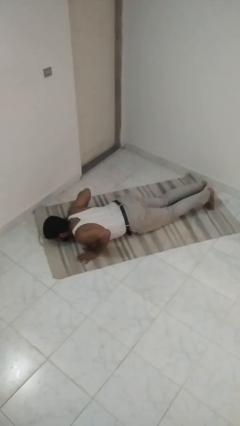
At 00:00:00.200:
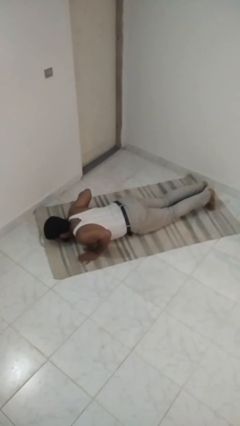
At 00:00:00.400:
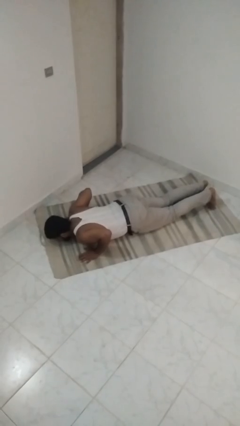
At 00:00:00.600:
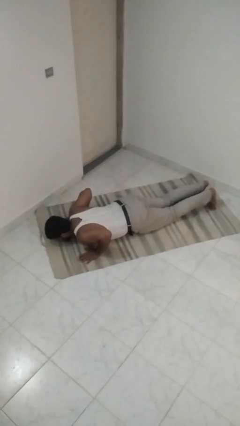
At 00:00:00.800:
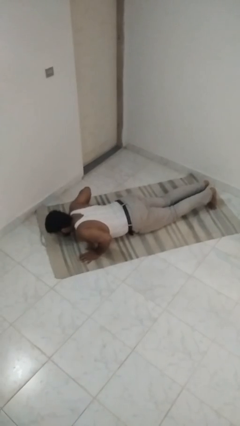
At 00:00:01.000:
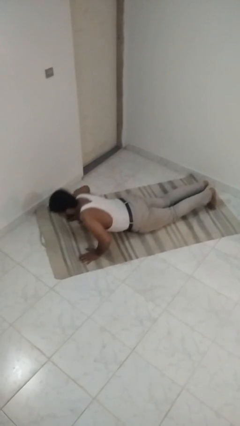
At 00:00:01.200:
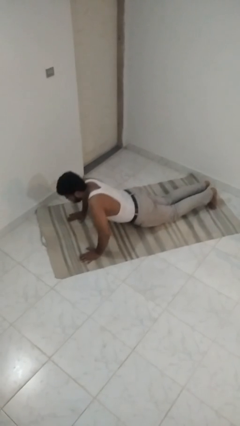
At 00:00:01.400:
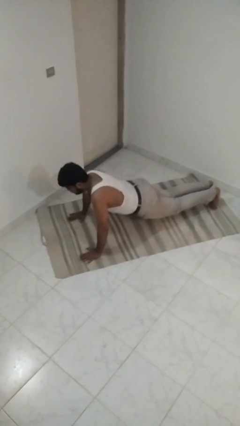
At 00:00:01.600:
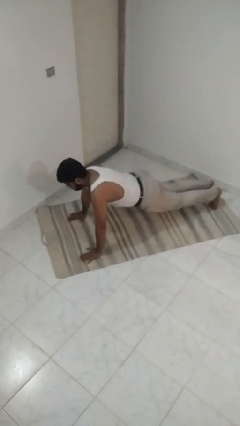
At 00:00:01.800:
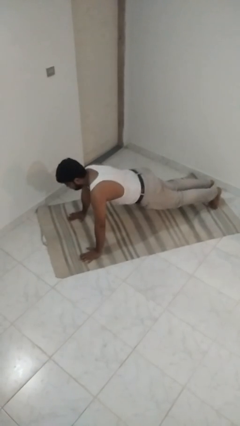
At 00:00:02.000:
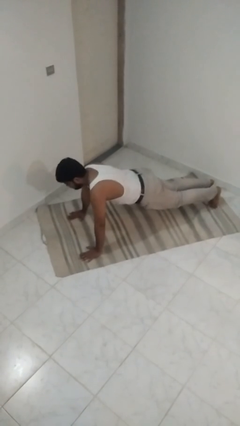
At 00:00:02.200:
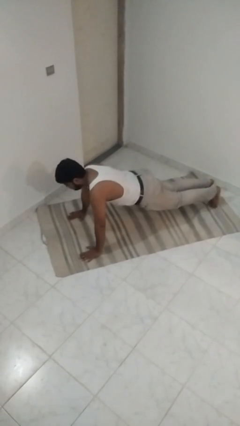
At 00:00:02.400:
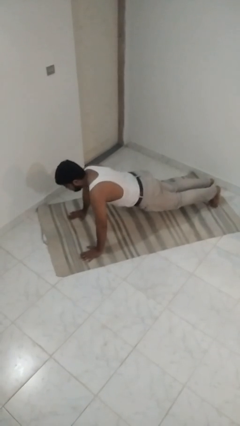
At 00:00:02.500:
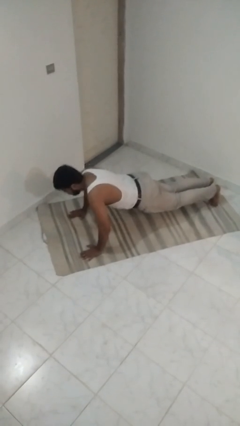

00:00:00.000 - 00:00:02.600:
person exercises with pushup

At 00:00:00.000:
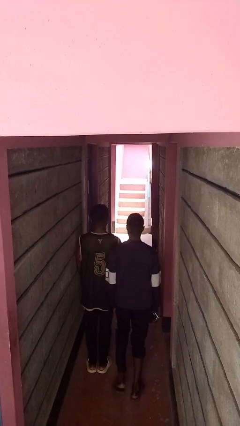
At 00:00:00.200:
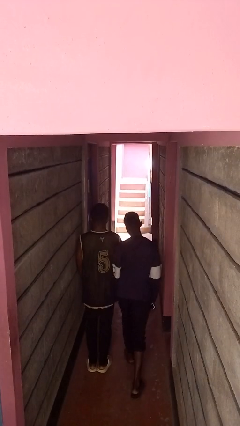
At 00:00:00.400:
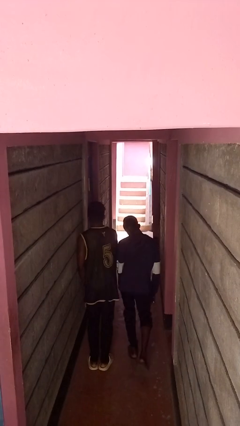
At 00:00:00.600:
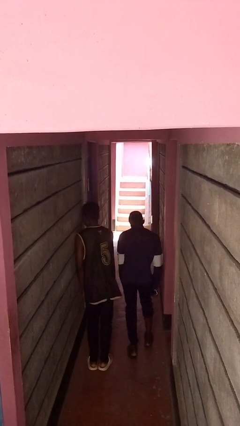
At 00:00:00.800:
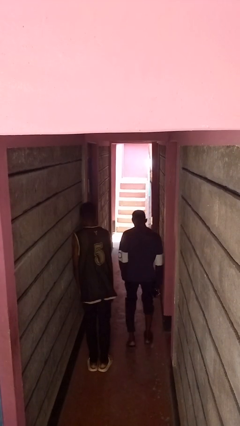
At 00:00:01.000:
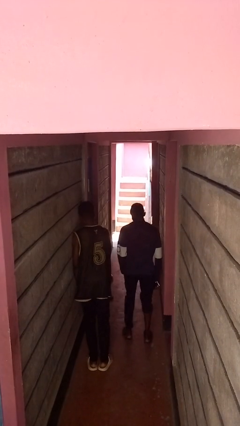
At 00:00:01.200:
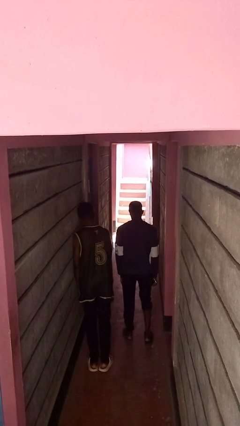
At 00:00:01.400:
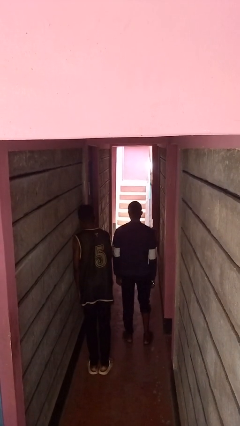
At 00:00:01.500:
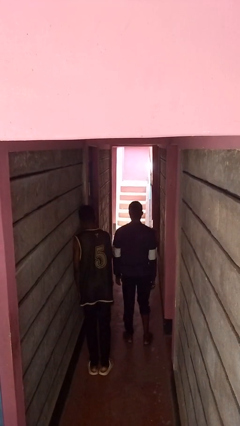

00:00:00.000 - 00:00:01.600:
person bumps into person

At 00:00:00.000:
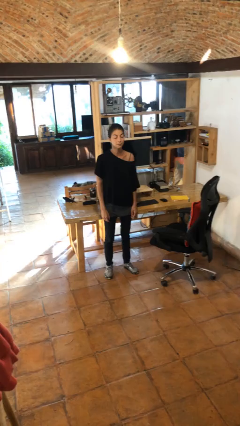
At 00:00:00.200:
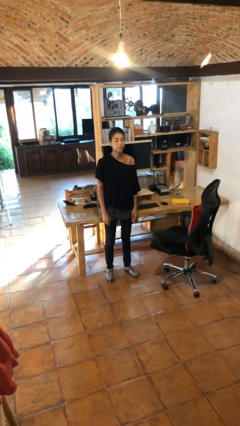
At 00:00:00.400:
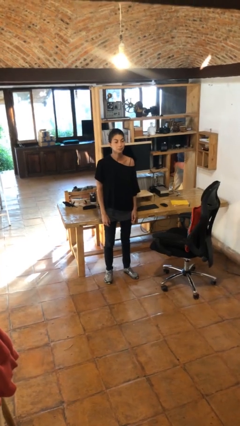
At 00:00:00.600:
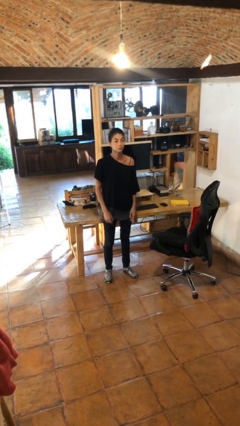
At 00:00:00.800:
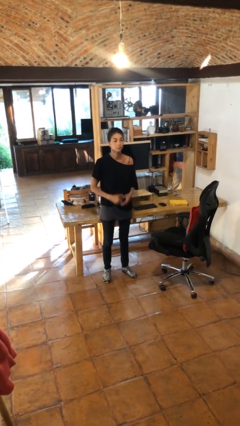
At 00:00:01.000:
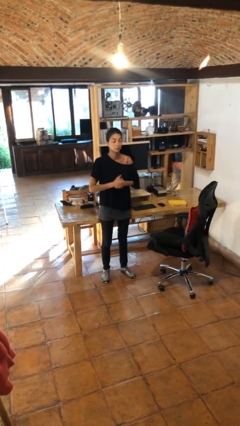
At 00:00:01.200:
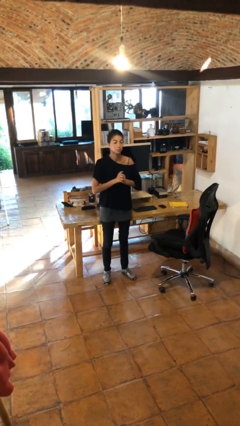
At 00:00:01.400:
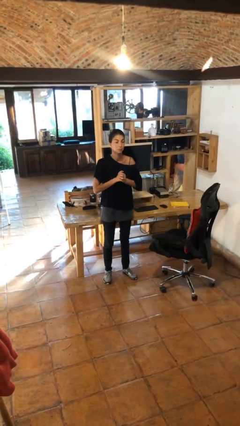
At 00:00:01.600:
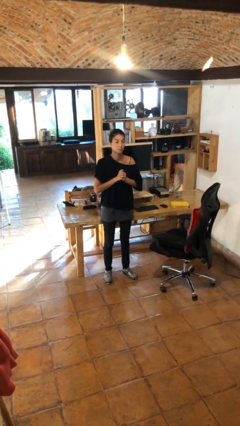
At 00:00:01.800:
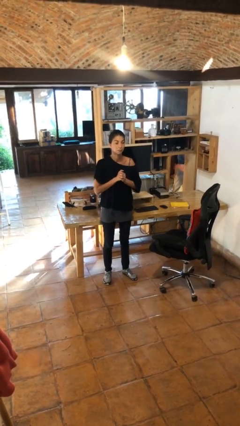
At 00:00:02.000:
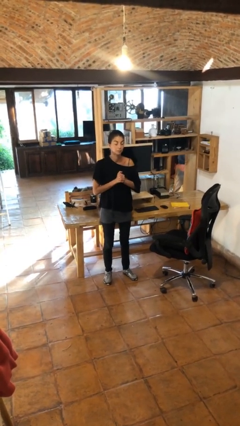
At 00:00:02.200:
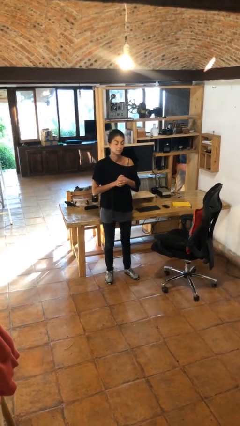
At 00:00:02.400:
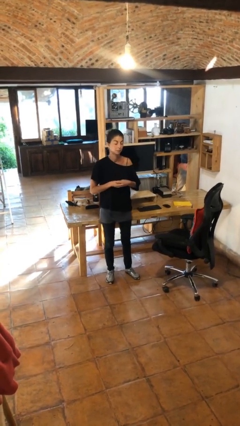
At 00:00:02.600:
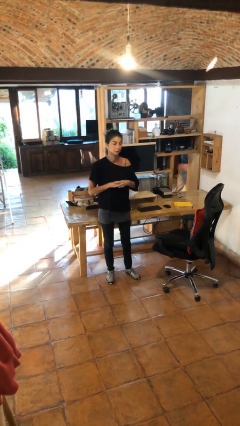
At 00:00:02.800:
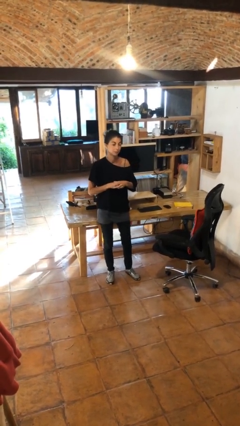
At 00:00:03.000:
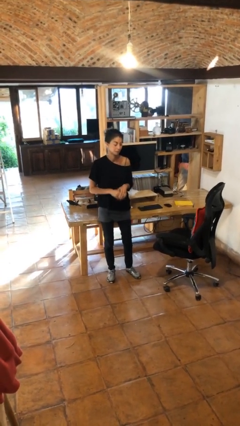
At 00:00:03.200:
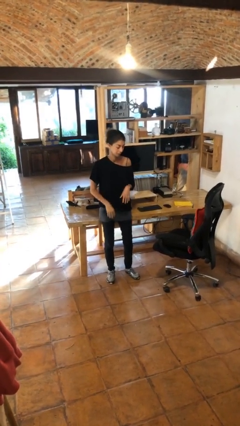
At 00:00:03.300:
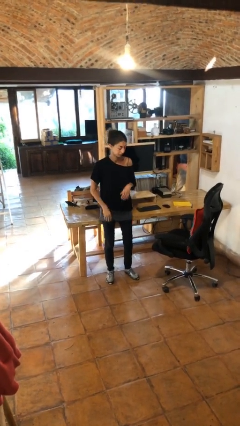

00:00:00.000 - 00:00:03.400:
person cracks knuckles

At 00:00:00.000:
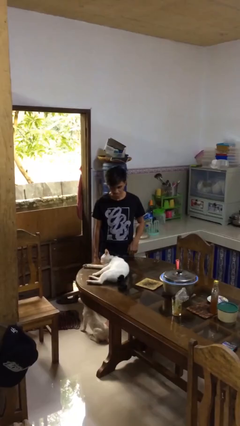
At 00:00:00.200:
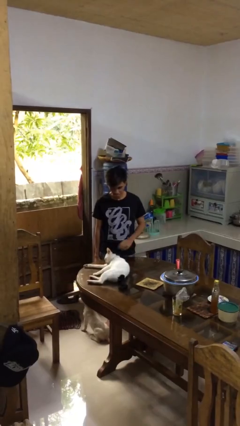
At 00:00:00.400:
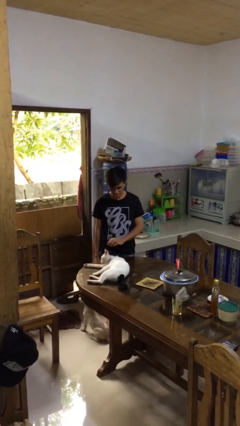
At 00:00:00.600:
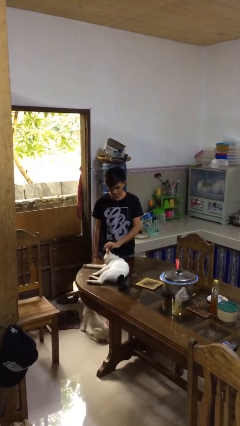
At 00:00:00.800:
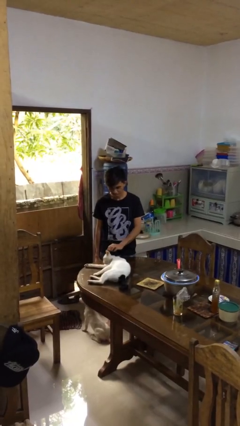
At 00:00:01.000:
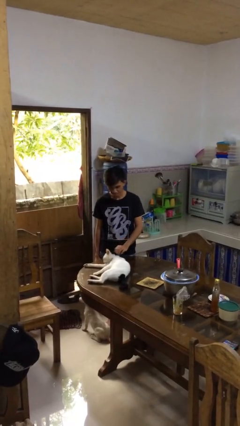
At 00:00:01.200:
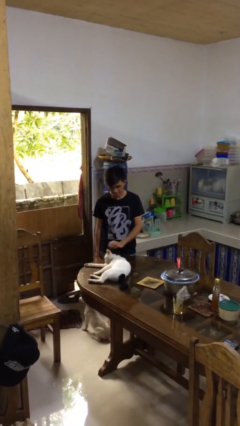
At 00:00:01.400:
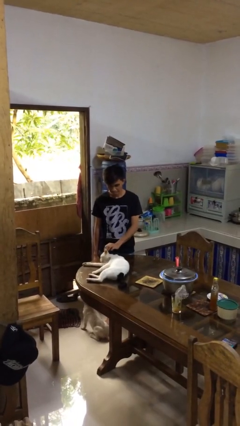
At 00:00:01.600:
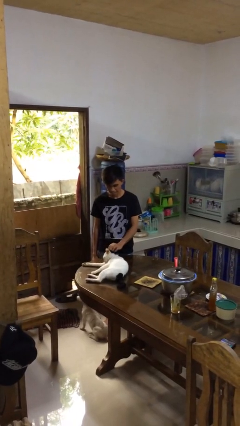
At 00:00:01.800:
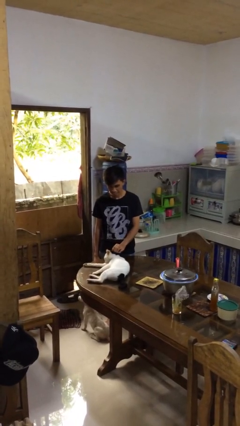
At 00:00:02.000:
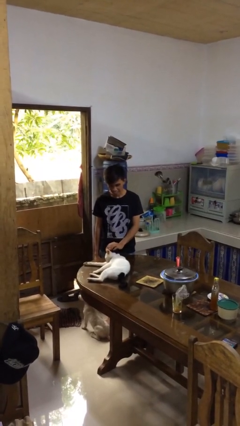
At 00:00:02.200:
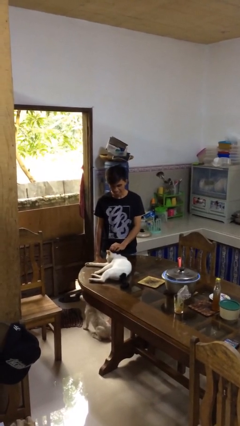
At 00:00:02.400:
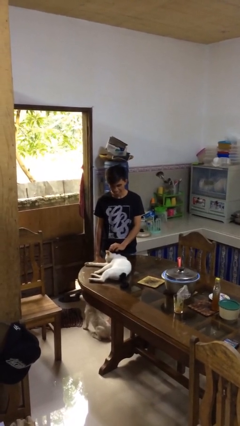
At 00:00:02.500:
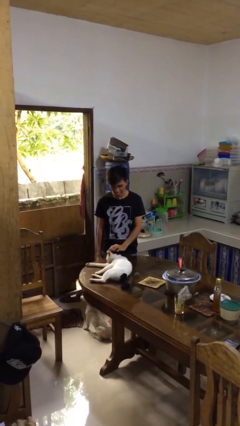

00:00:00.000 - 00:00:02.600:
person pets cat

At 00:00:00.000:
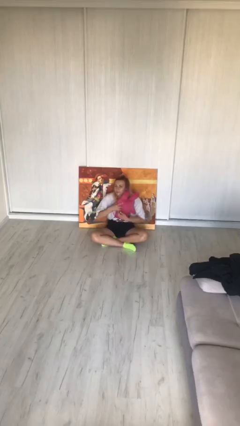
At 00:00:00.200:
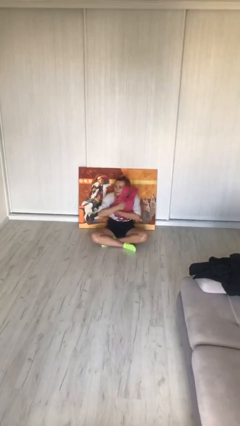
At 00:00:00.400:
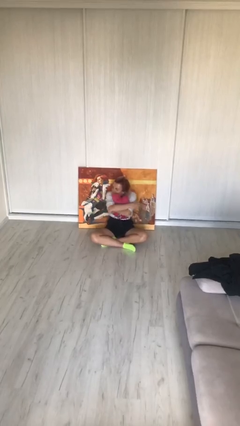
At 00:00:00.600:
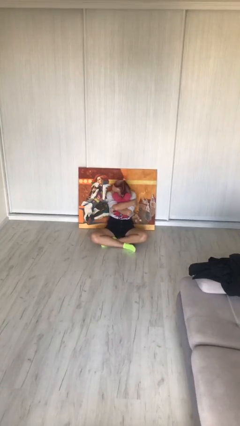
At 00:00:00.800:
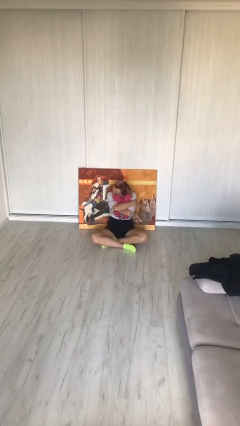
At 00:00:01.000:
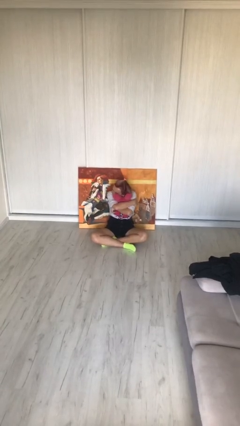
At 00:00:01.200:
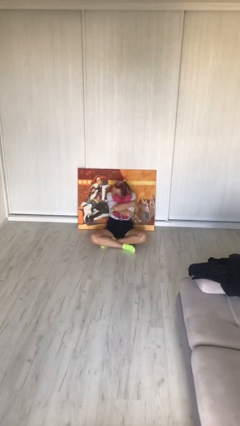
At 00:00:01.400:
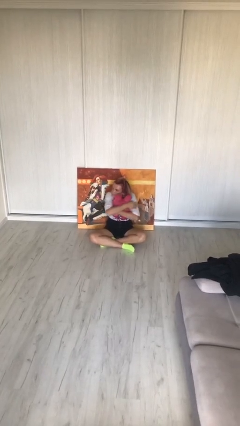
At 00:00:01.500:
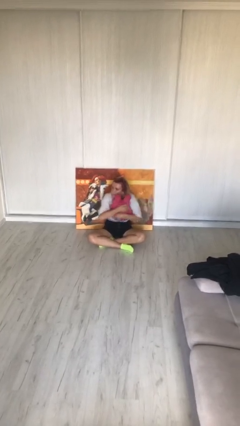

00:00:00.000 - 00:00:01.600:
person hugs stuffed animal

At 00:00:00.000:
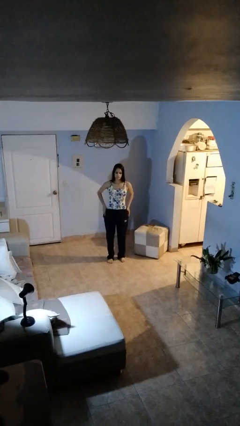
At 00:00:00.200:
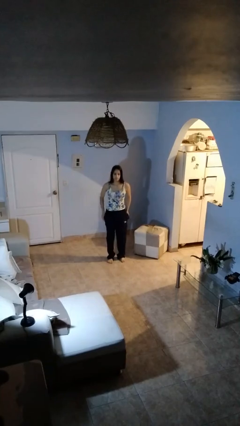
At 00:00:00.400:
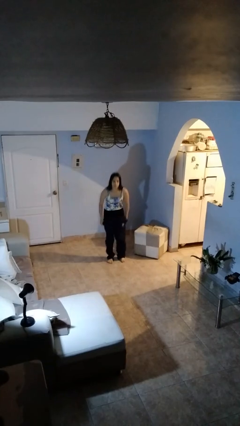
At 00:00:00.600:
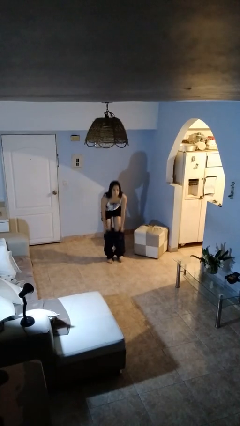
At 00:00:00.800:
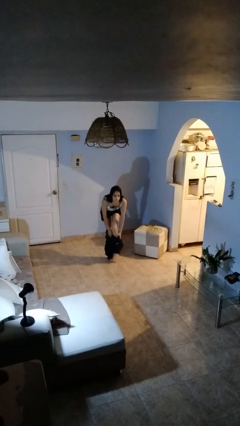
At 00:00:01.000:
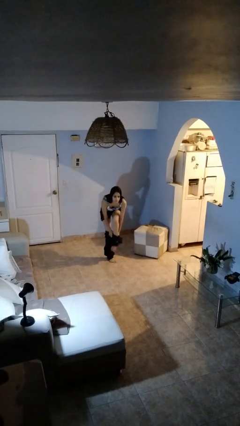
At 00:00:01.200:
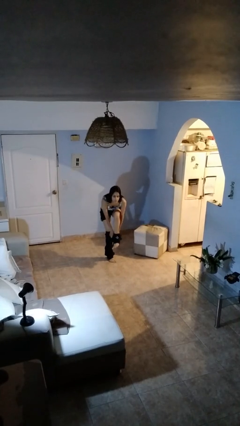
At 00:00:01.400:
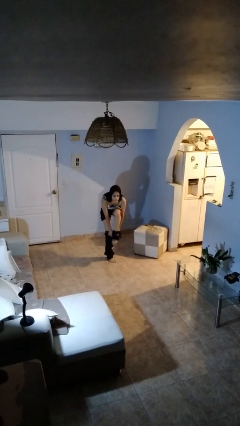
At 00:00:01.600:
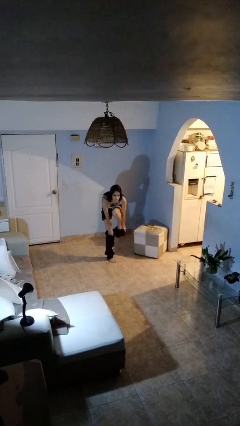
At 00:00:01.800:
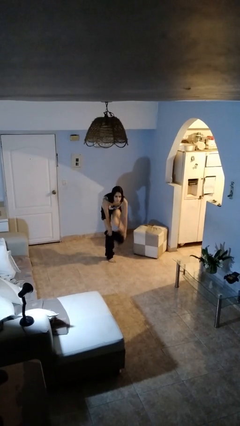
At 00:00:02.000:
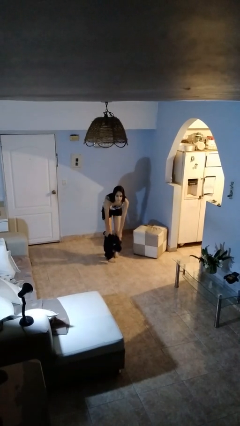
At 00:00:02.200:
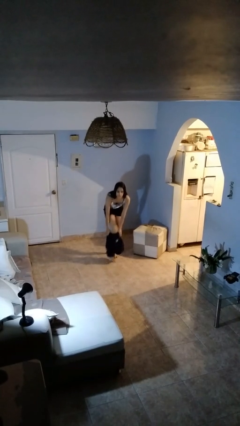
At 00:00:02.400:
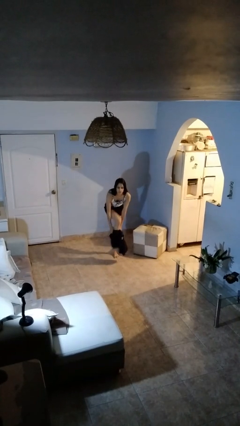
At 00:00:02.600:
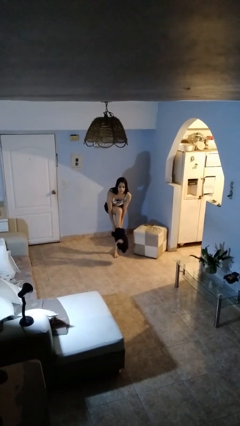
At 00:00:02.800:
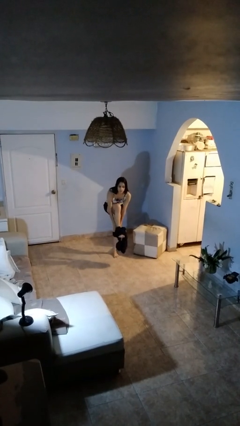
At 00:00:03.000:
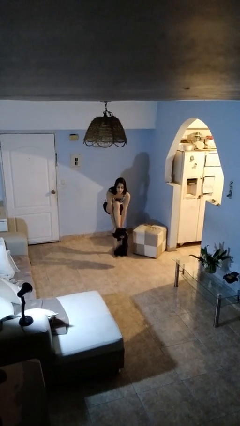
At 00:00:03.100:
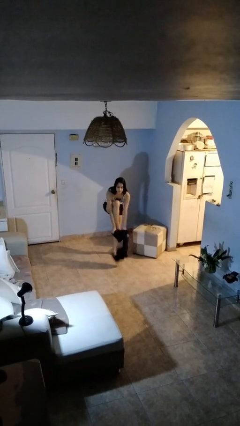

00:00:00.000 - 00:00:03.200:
person puts on pants

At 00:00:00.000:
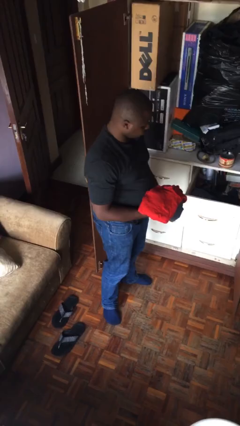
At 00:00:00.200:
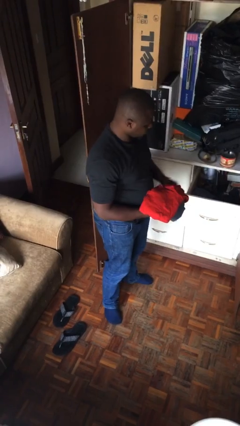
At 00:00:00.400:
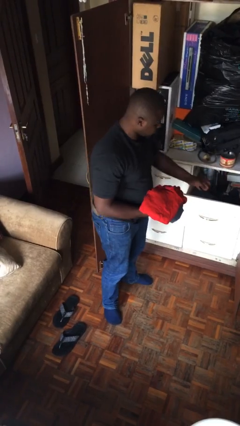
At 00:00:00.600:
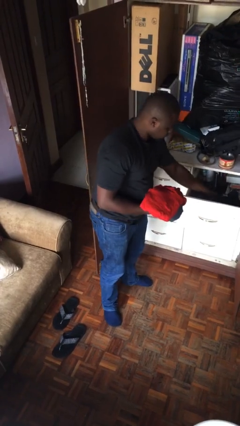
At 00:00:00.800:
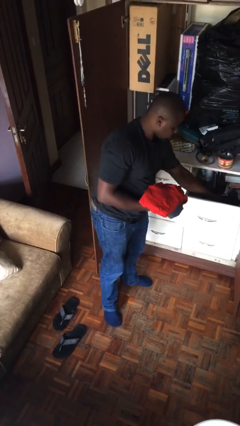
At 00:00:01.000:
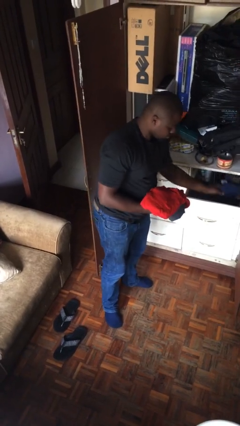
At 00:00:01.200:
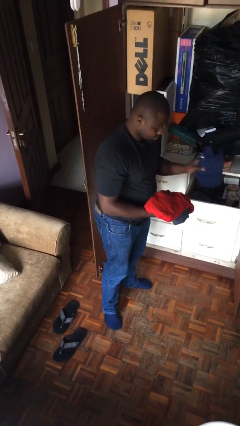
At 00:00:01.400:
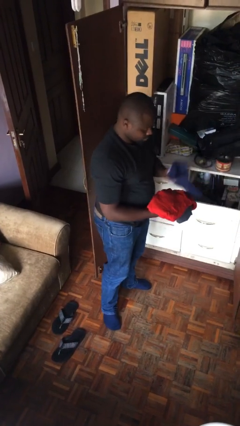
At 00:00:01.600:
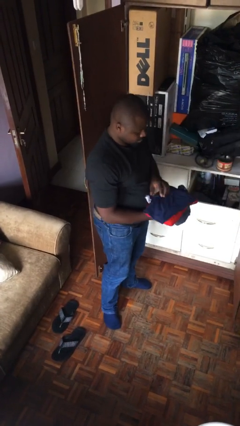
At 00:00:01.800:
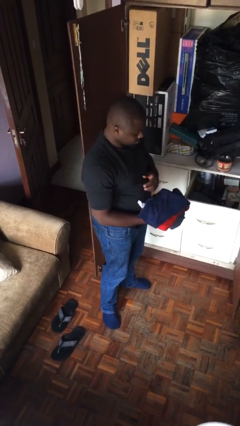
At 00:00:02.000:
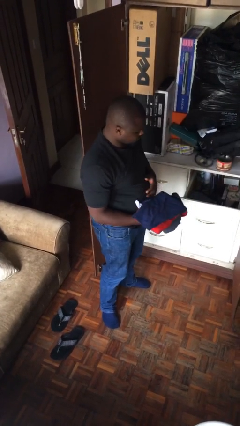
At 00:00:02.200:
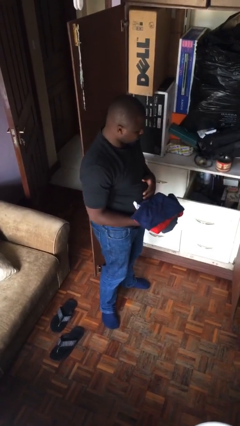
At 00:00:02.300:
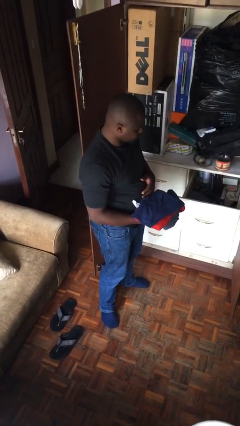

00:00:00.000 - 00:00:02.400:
person takes clothes from dresser
